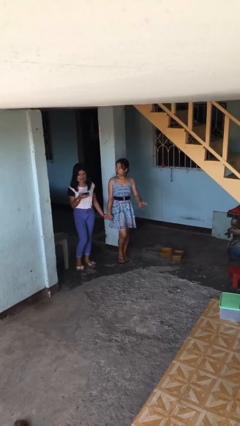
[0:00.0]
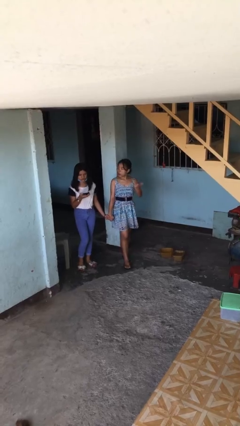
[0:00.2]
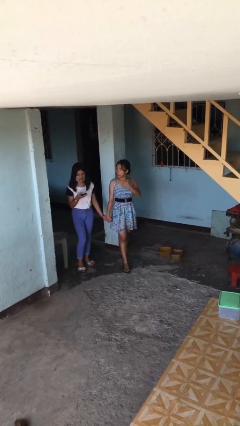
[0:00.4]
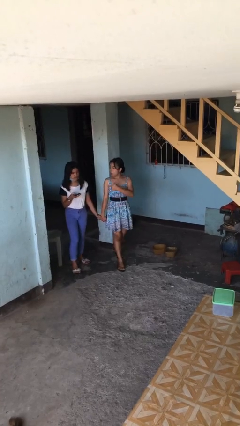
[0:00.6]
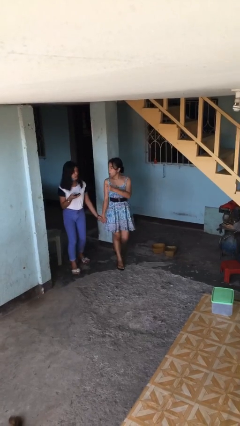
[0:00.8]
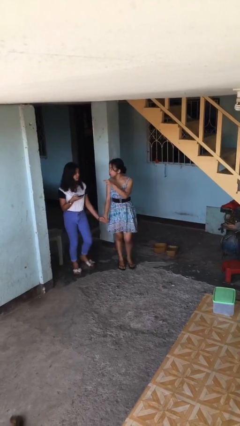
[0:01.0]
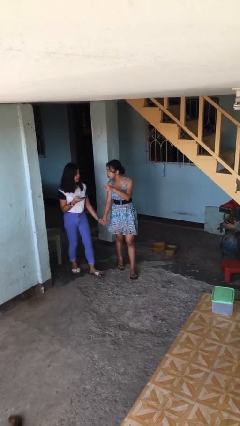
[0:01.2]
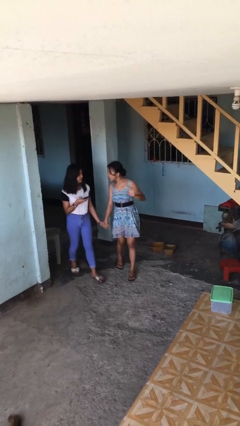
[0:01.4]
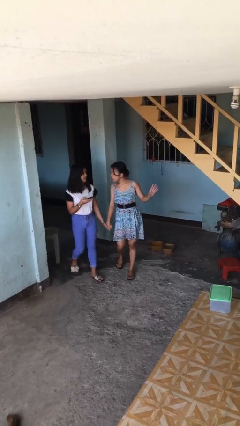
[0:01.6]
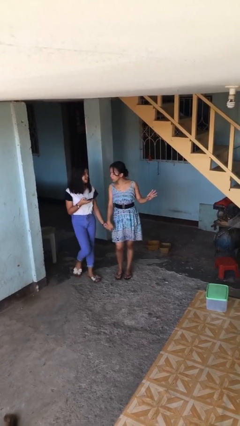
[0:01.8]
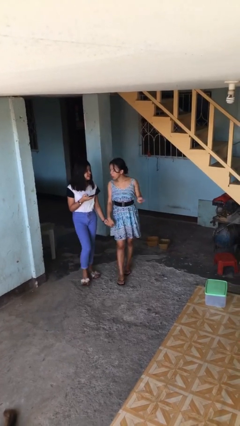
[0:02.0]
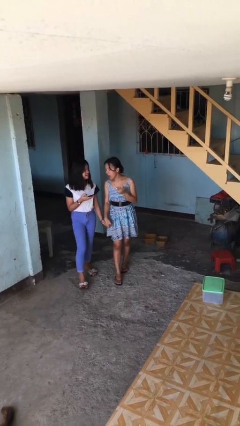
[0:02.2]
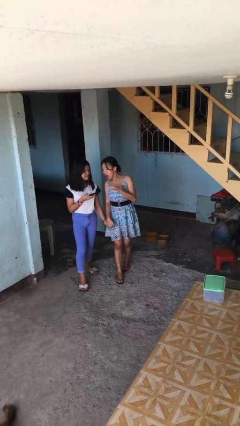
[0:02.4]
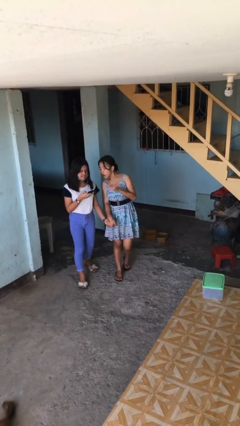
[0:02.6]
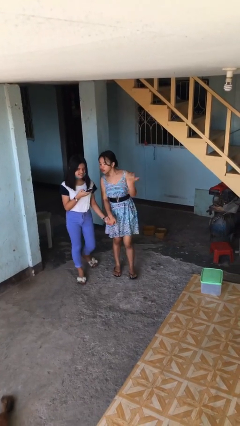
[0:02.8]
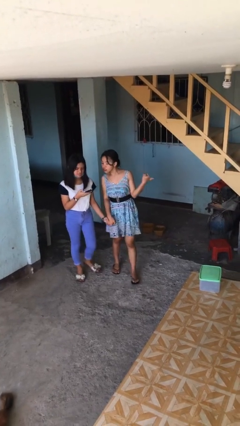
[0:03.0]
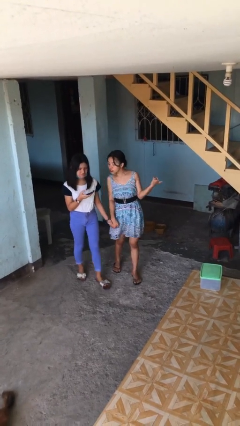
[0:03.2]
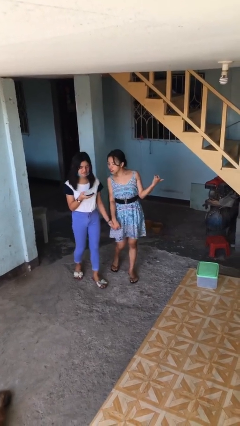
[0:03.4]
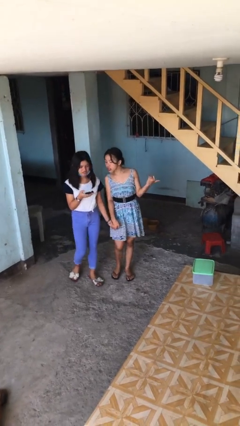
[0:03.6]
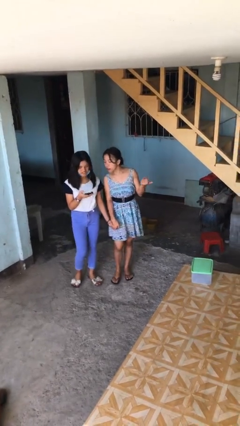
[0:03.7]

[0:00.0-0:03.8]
person holds hand

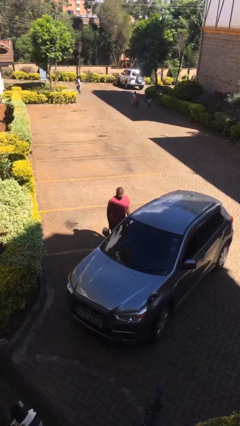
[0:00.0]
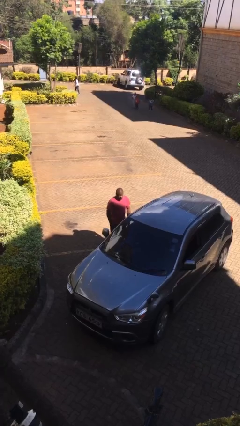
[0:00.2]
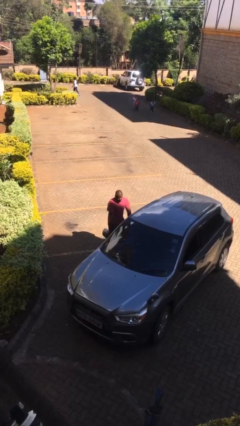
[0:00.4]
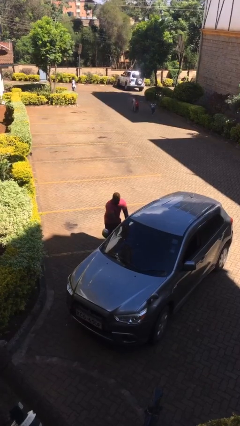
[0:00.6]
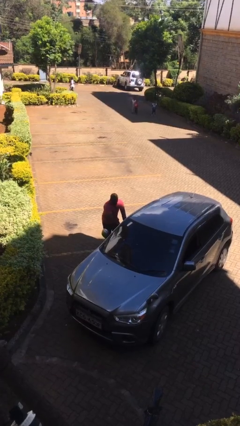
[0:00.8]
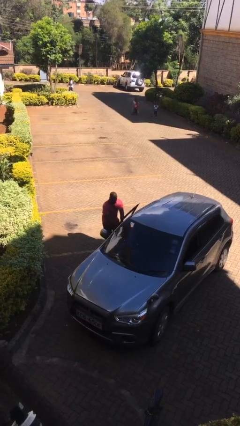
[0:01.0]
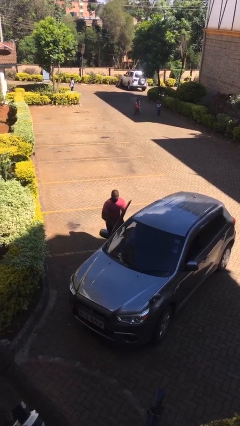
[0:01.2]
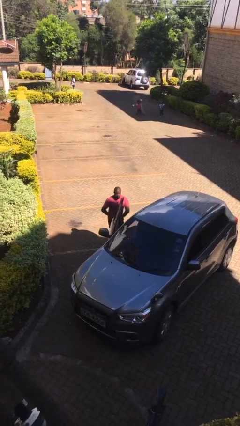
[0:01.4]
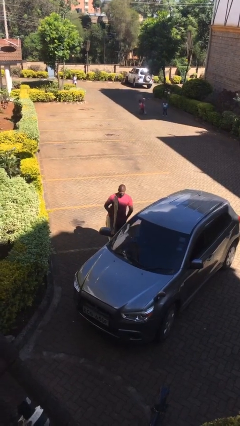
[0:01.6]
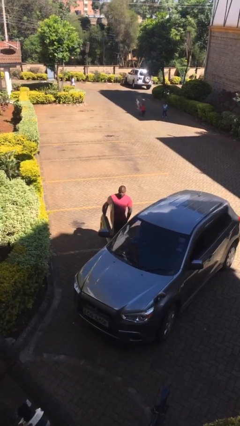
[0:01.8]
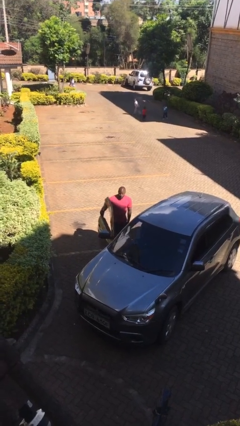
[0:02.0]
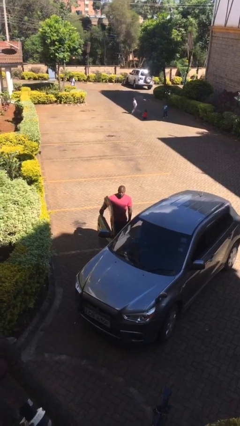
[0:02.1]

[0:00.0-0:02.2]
person opens car door

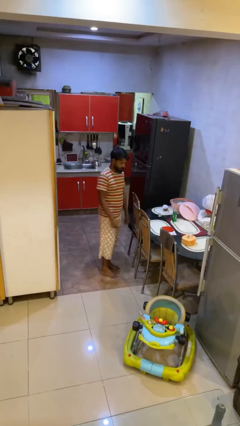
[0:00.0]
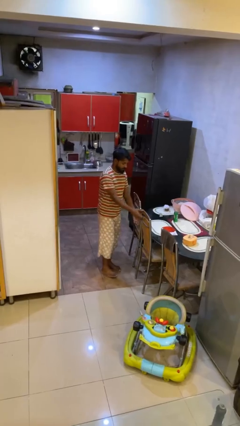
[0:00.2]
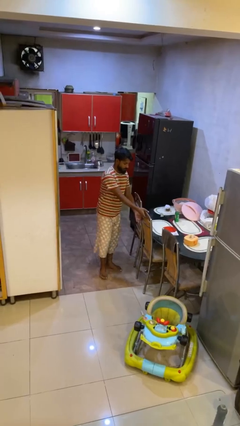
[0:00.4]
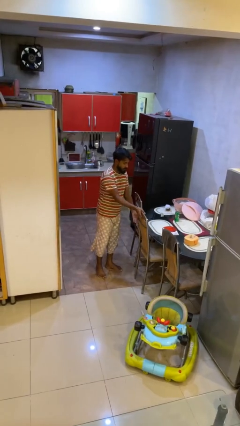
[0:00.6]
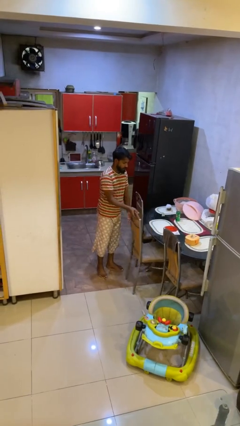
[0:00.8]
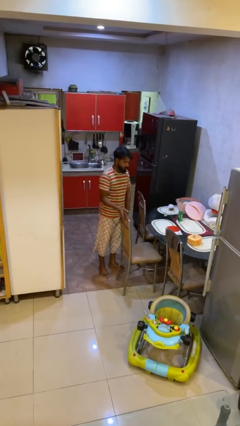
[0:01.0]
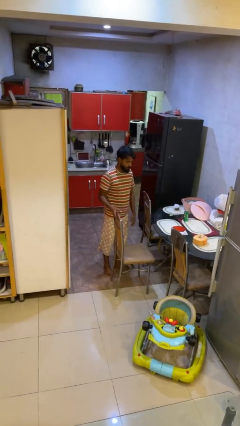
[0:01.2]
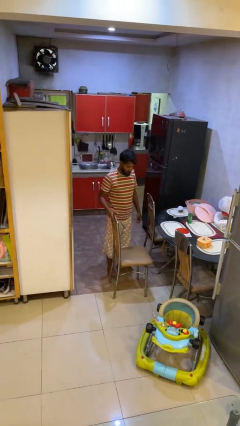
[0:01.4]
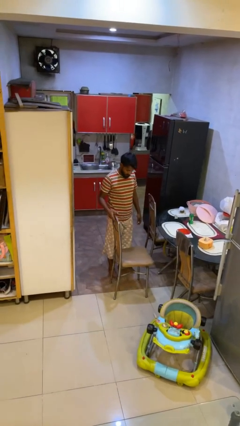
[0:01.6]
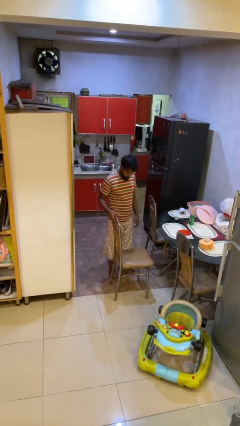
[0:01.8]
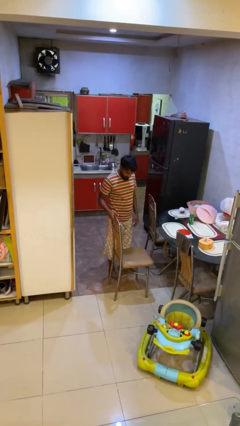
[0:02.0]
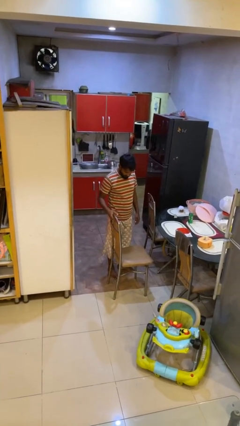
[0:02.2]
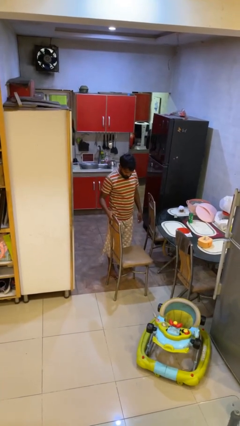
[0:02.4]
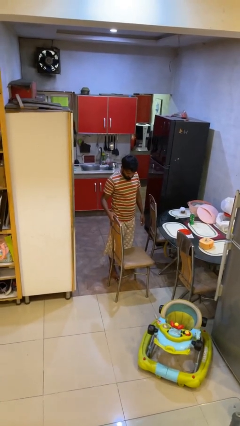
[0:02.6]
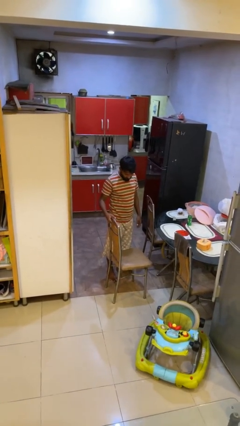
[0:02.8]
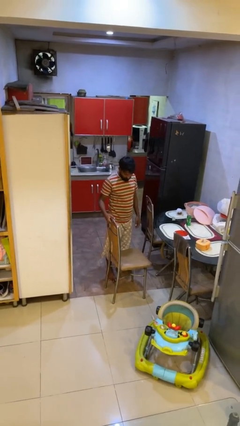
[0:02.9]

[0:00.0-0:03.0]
person pulls out chair

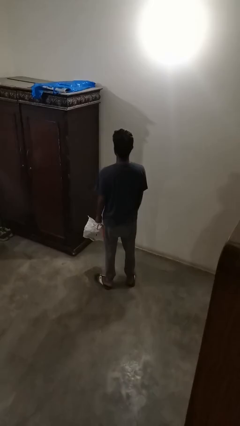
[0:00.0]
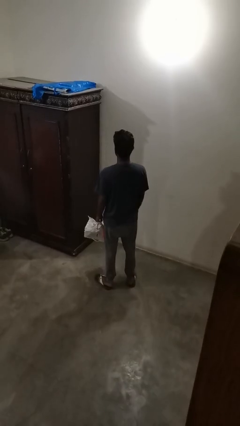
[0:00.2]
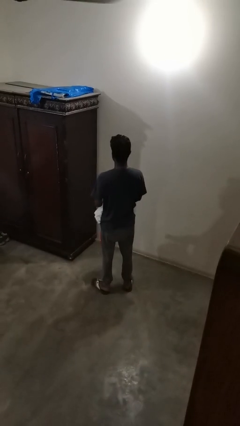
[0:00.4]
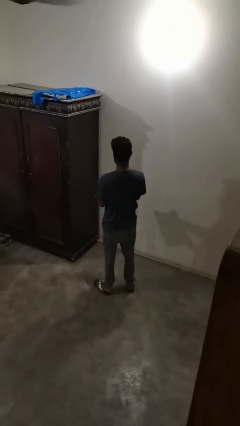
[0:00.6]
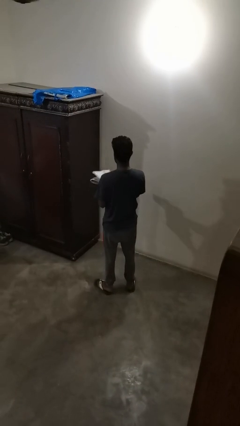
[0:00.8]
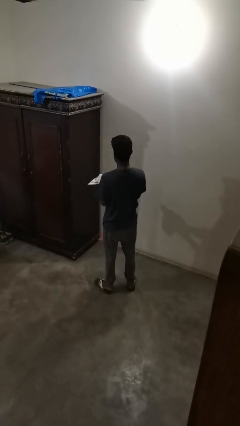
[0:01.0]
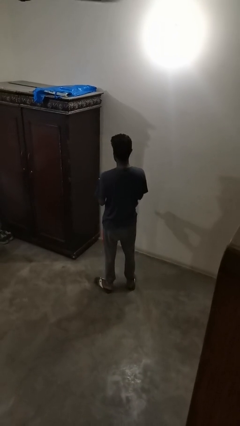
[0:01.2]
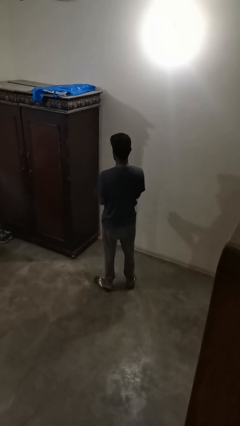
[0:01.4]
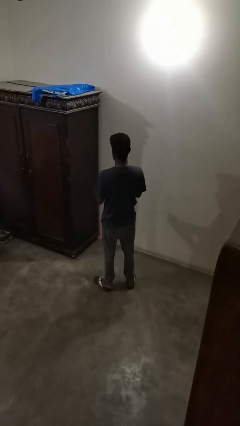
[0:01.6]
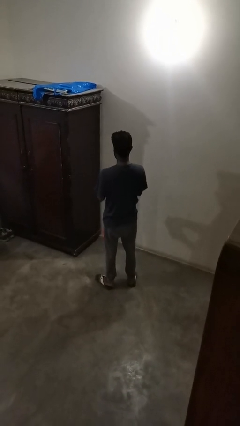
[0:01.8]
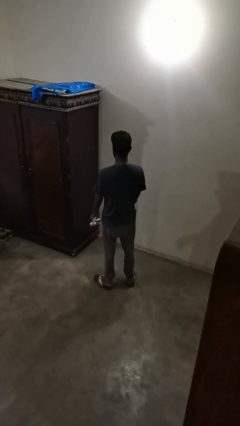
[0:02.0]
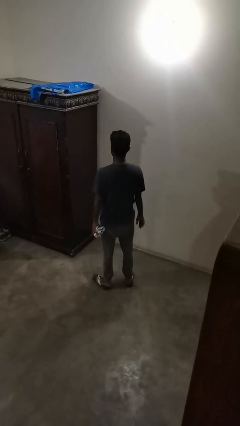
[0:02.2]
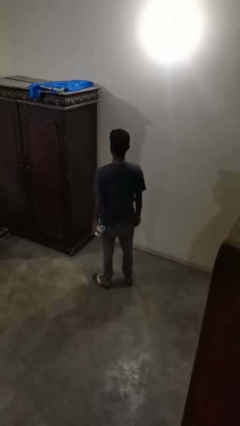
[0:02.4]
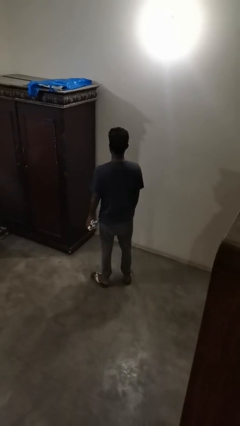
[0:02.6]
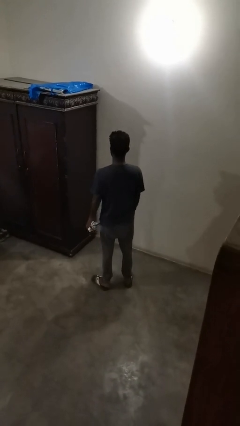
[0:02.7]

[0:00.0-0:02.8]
person crumples paper

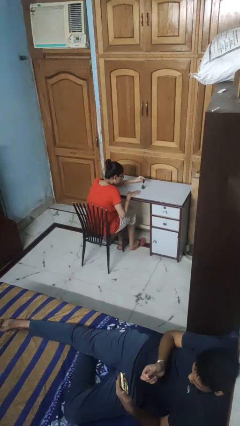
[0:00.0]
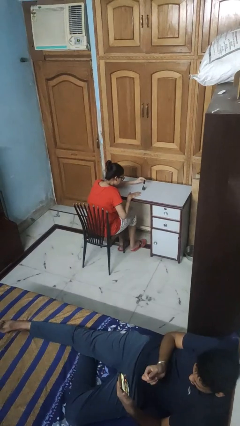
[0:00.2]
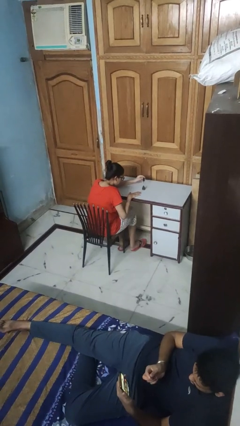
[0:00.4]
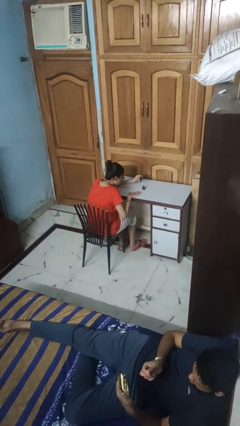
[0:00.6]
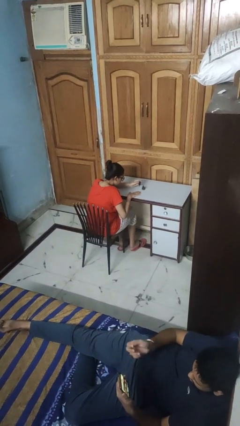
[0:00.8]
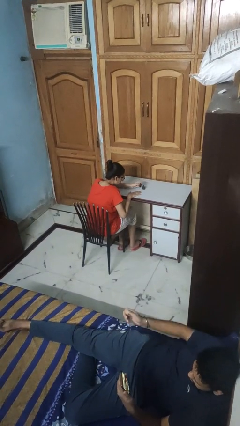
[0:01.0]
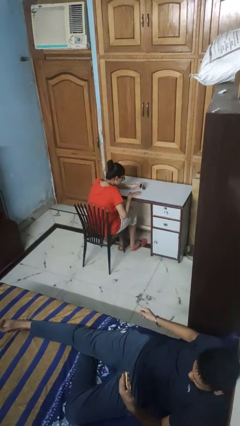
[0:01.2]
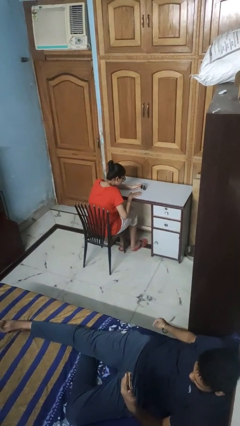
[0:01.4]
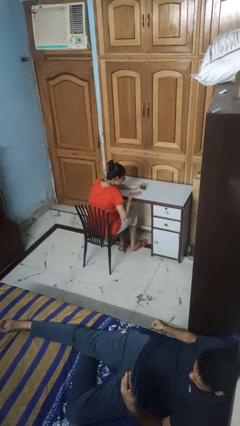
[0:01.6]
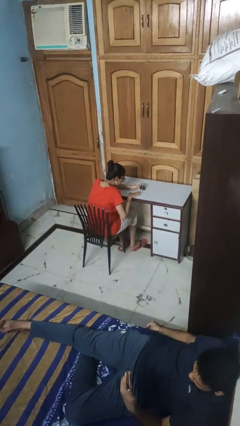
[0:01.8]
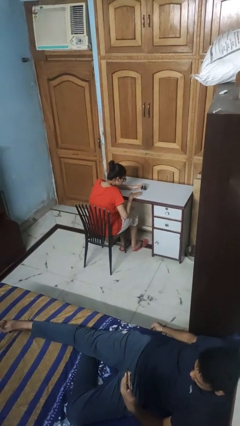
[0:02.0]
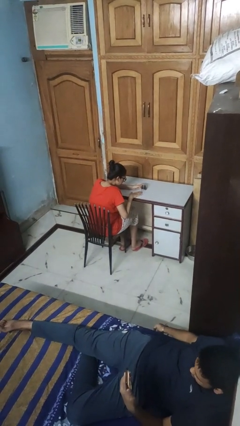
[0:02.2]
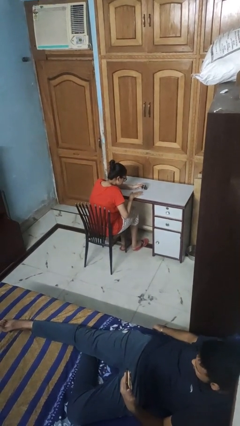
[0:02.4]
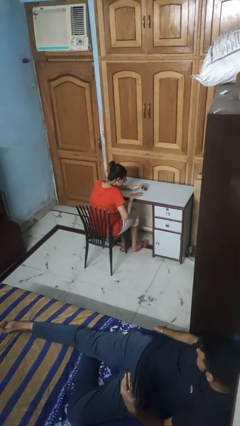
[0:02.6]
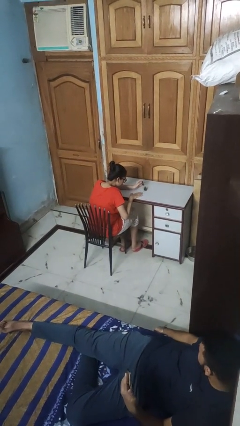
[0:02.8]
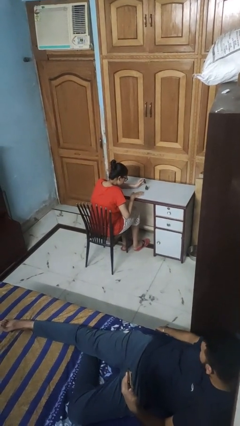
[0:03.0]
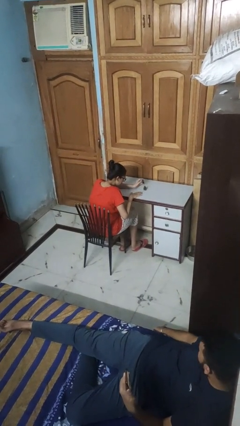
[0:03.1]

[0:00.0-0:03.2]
person paints fingernails

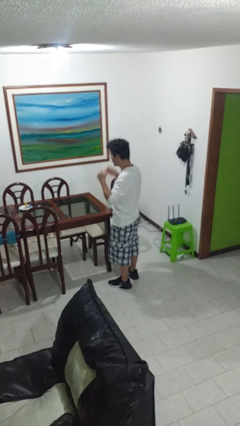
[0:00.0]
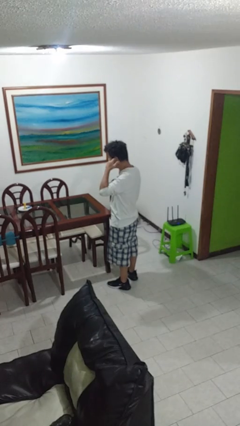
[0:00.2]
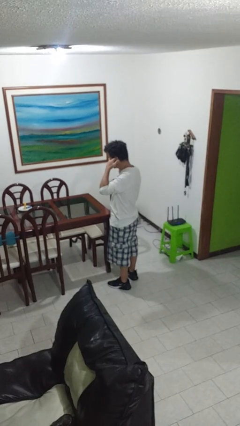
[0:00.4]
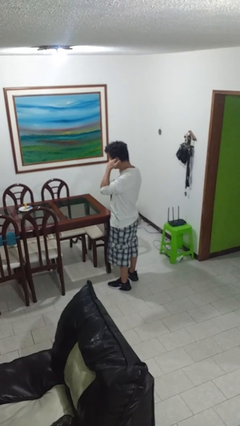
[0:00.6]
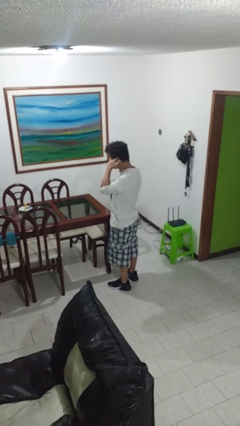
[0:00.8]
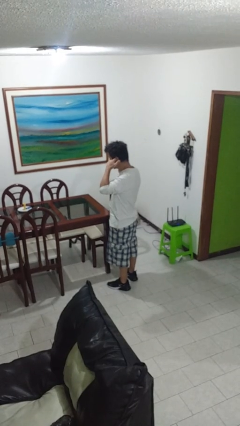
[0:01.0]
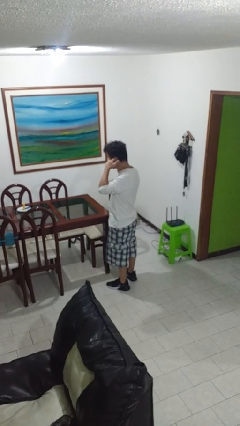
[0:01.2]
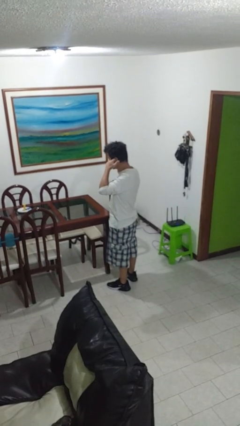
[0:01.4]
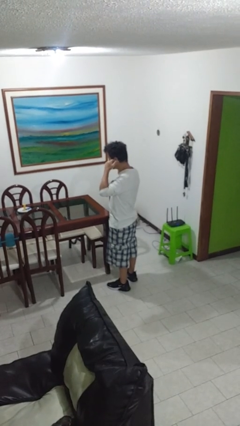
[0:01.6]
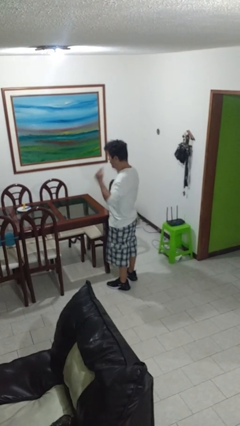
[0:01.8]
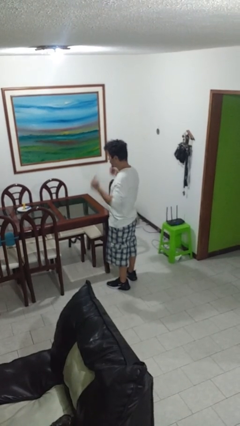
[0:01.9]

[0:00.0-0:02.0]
person puts fingers in ear

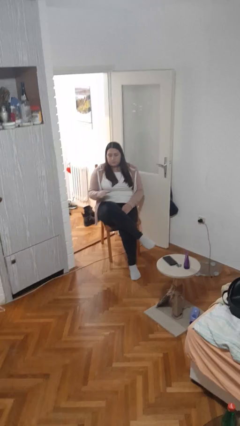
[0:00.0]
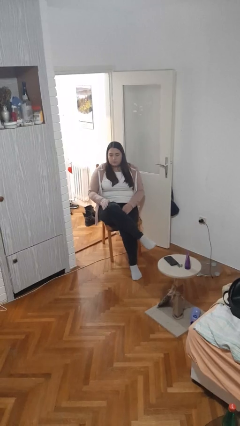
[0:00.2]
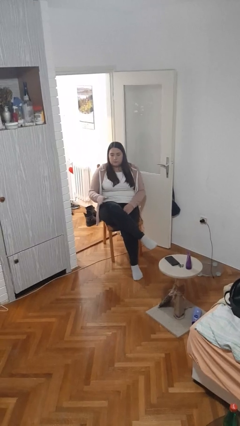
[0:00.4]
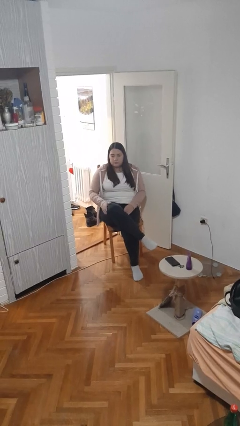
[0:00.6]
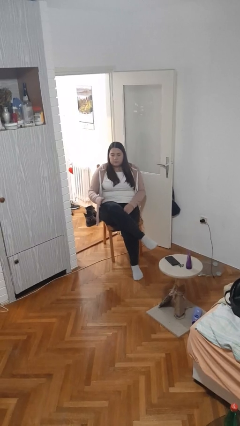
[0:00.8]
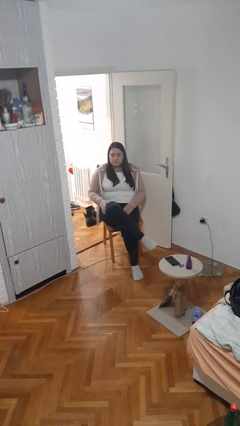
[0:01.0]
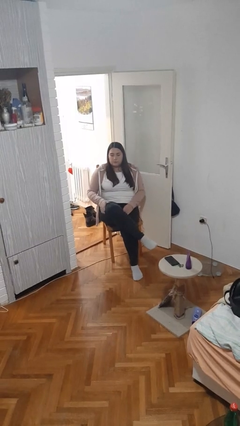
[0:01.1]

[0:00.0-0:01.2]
person slaps hands on thighs
